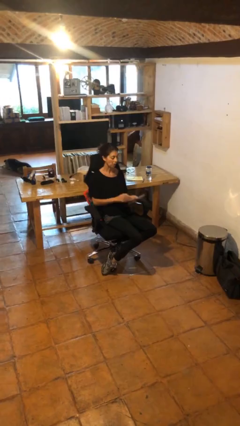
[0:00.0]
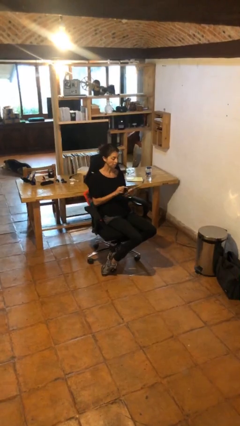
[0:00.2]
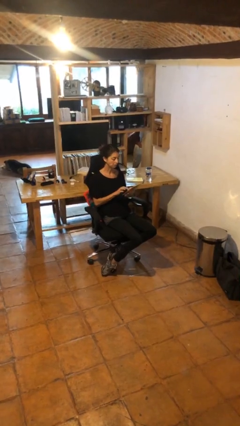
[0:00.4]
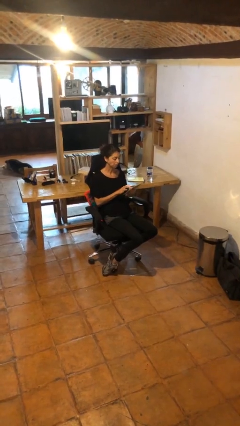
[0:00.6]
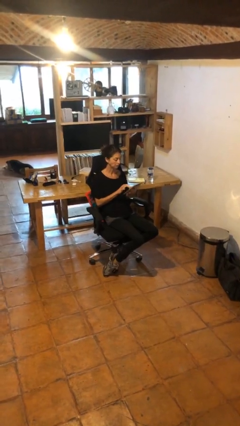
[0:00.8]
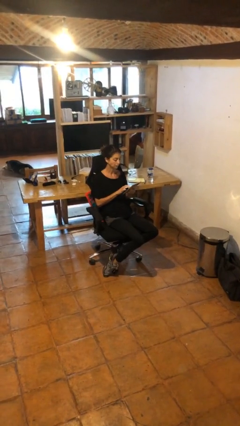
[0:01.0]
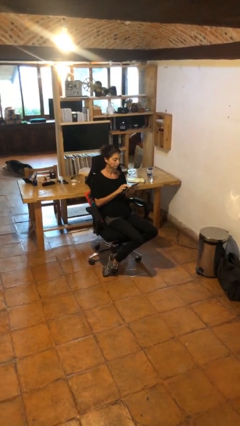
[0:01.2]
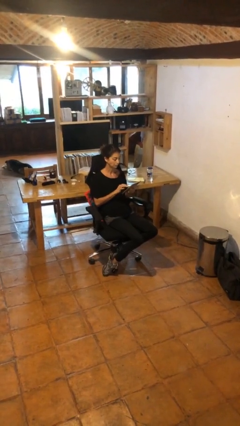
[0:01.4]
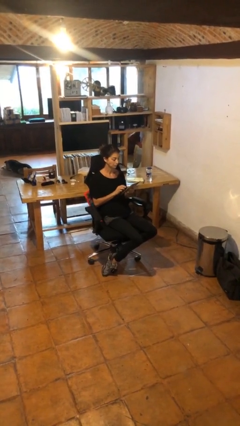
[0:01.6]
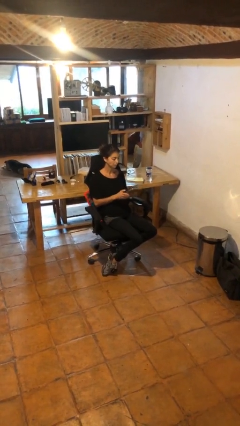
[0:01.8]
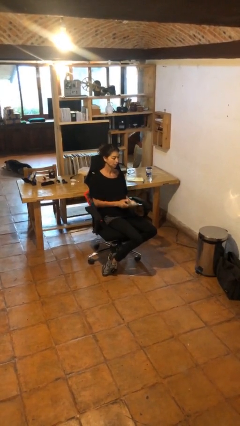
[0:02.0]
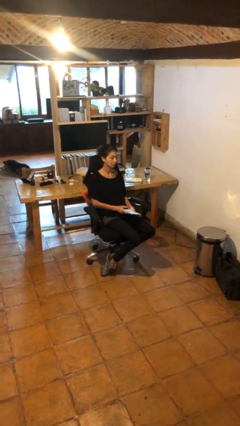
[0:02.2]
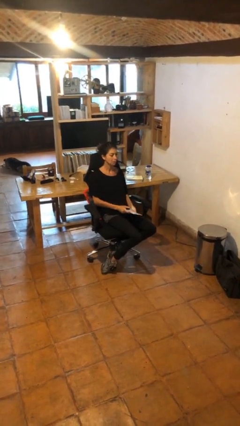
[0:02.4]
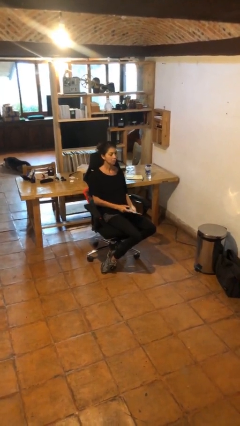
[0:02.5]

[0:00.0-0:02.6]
person interacts with tablet

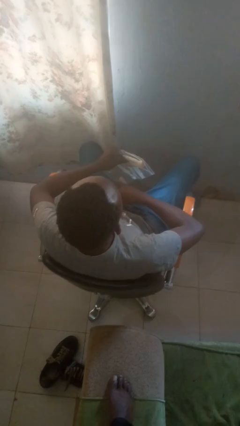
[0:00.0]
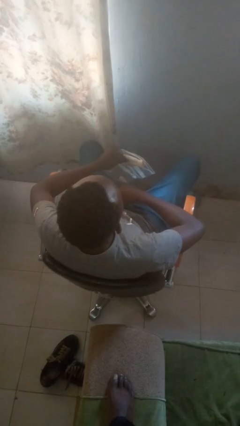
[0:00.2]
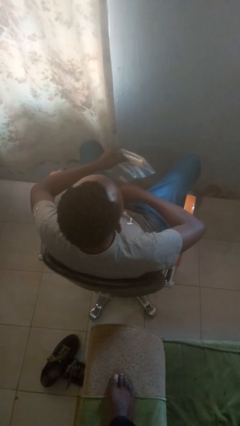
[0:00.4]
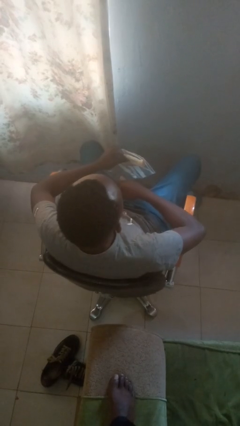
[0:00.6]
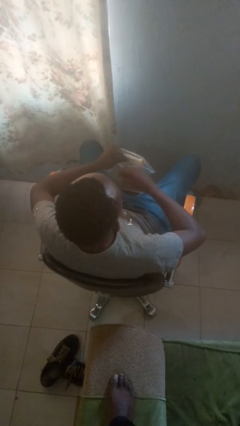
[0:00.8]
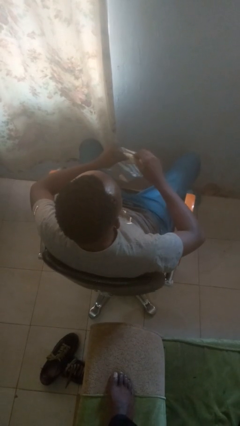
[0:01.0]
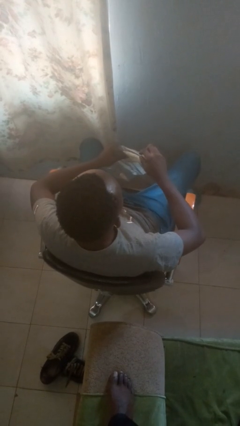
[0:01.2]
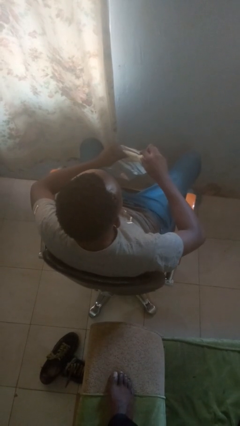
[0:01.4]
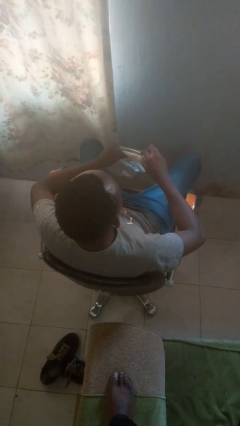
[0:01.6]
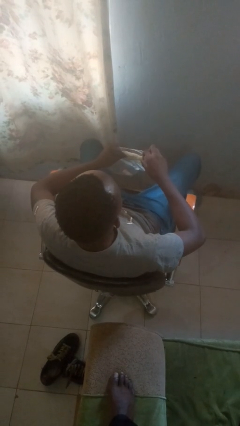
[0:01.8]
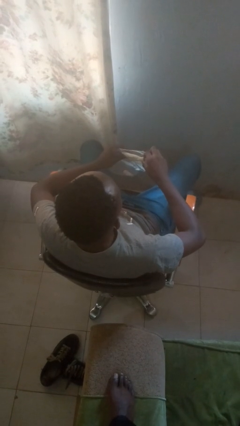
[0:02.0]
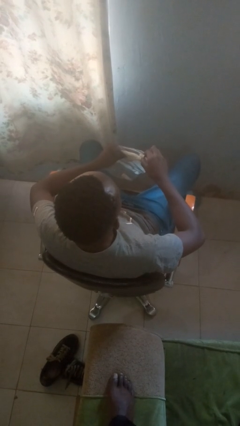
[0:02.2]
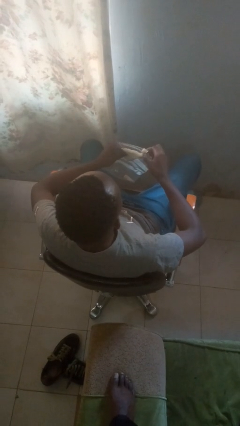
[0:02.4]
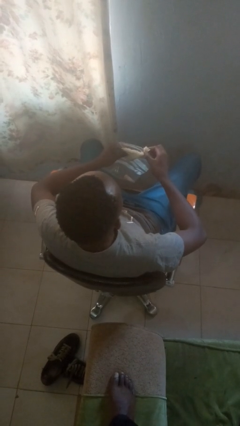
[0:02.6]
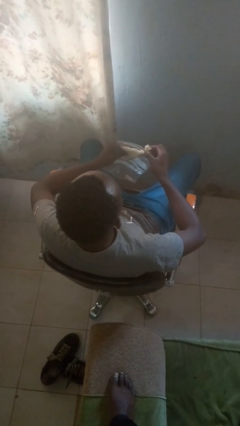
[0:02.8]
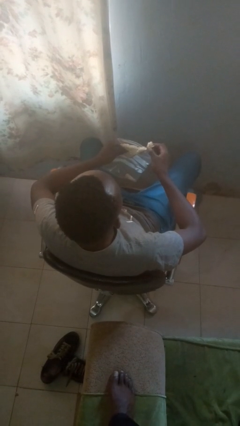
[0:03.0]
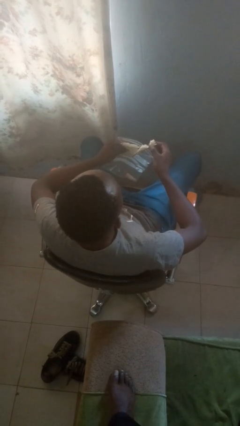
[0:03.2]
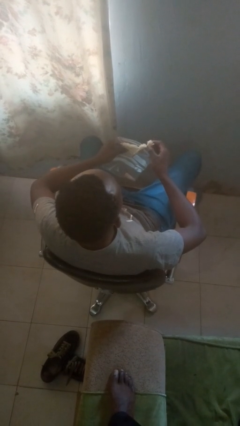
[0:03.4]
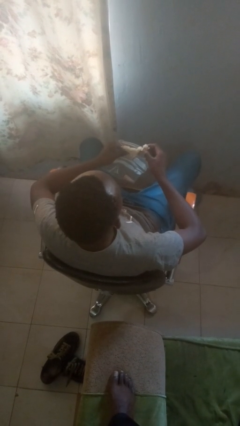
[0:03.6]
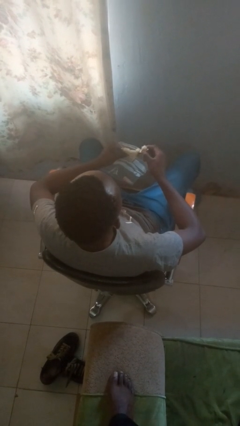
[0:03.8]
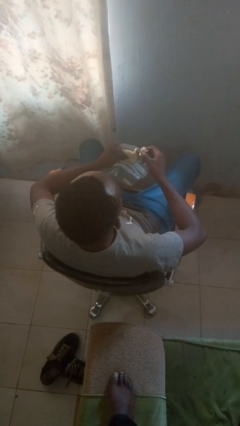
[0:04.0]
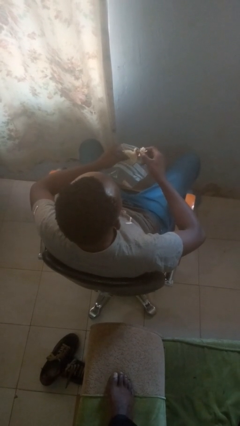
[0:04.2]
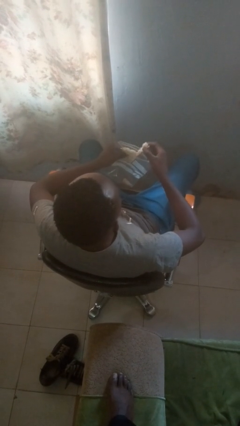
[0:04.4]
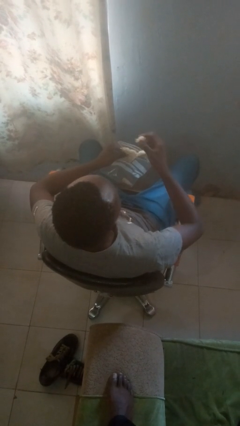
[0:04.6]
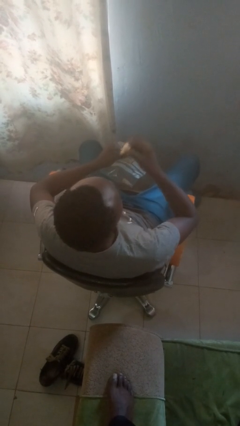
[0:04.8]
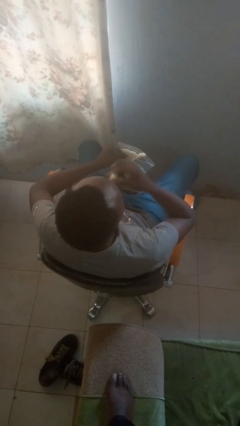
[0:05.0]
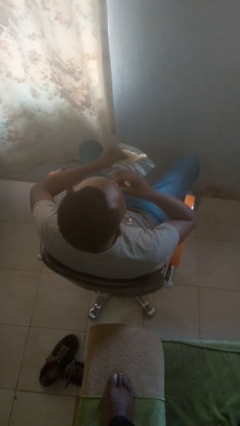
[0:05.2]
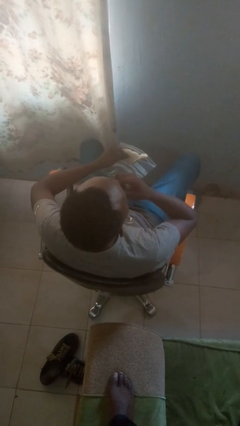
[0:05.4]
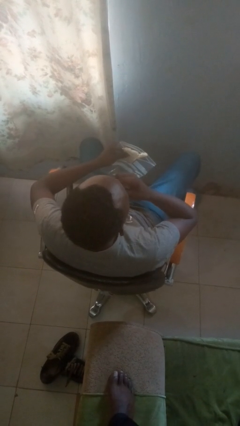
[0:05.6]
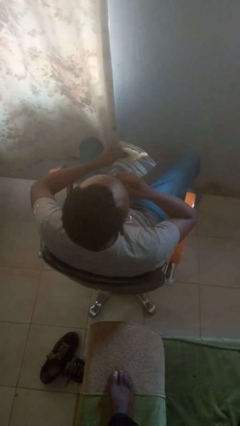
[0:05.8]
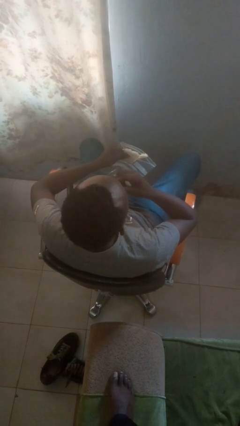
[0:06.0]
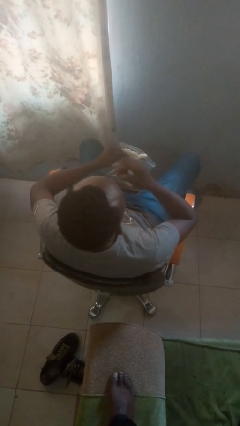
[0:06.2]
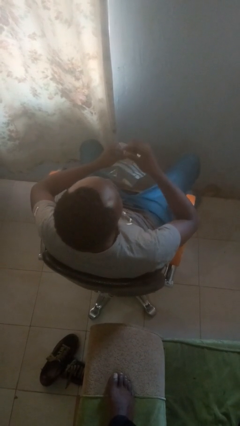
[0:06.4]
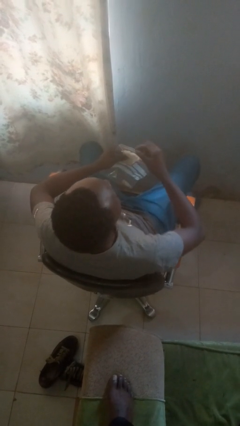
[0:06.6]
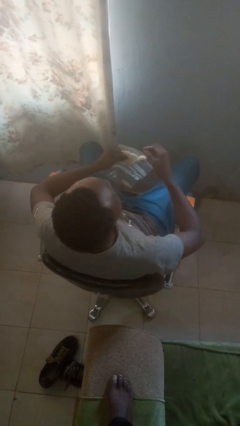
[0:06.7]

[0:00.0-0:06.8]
person eats snack from bag

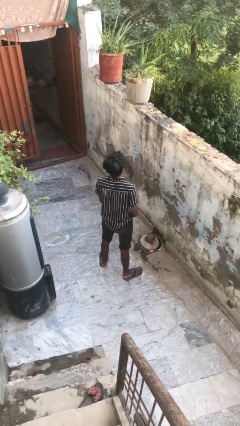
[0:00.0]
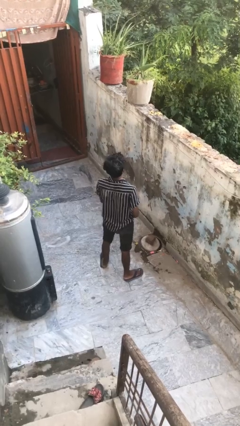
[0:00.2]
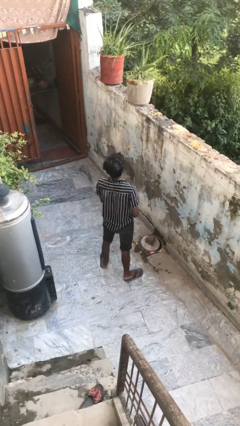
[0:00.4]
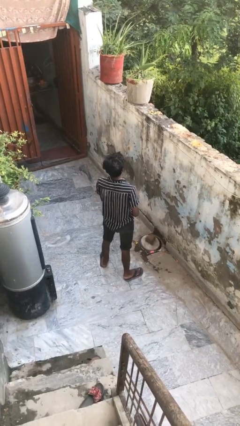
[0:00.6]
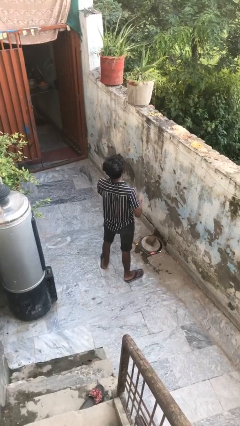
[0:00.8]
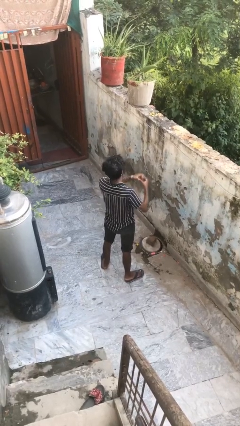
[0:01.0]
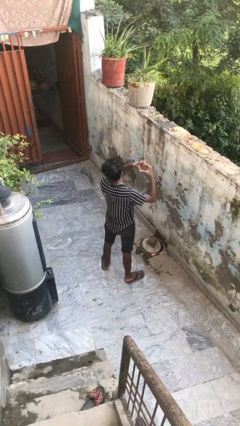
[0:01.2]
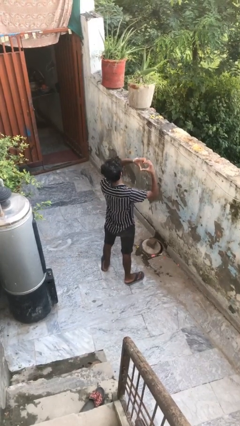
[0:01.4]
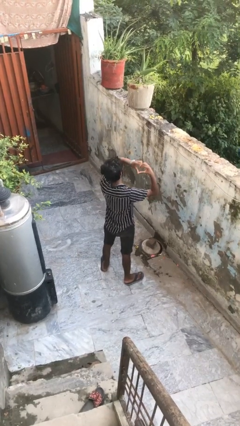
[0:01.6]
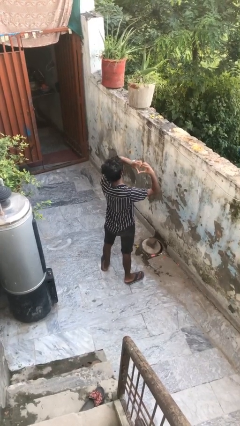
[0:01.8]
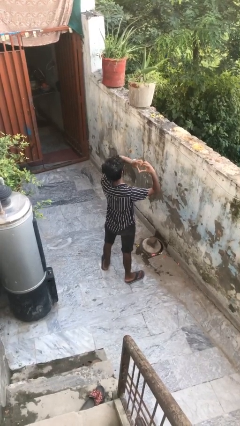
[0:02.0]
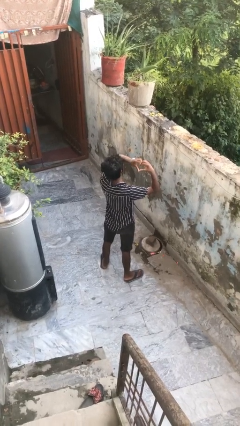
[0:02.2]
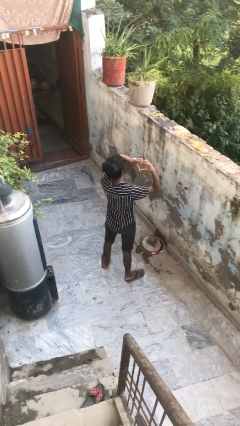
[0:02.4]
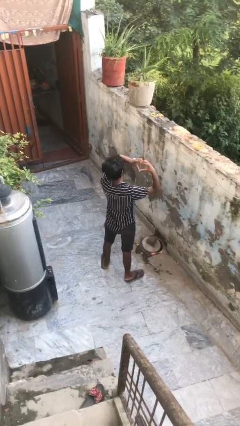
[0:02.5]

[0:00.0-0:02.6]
person gestures heart

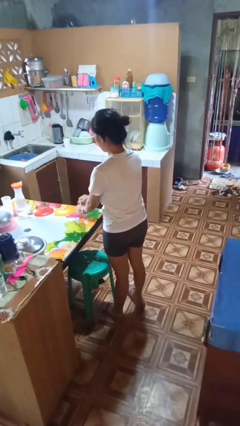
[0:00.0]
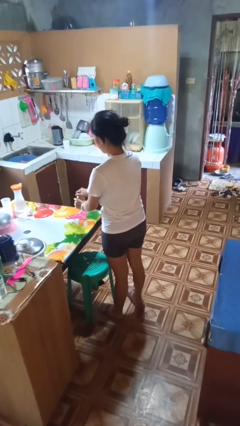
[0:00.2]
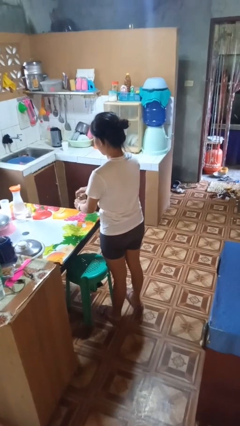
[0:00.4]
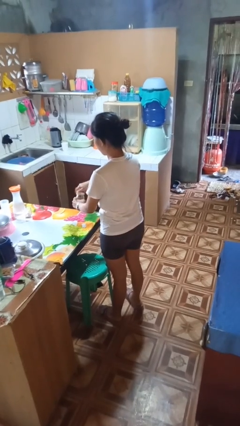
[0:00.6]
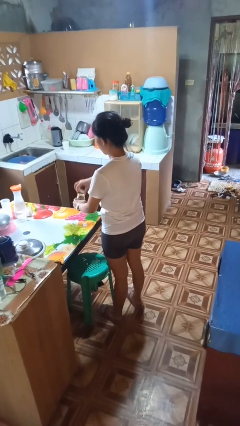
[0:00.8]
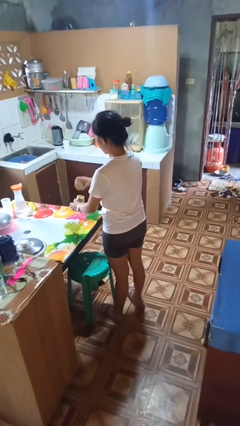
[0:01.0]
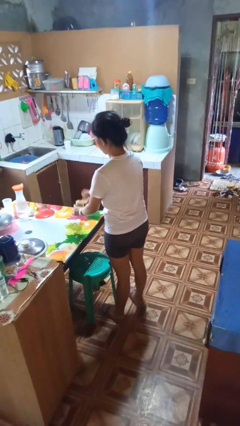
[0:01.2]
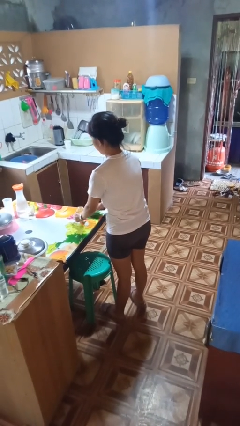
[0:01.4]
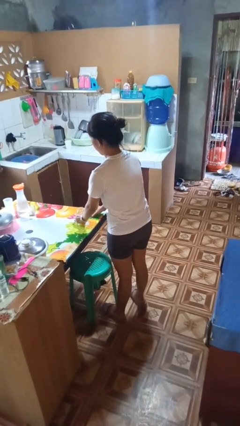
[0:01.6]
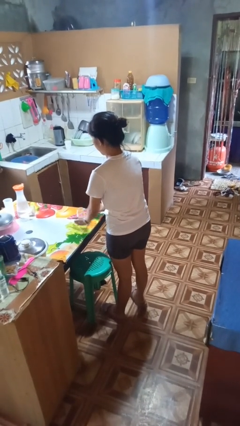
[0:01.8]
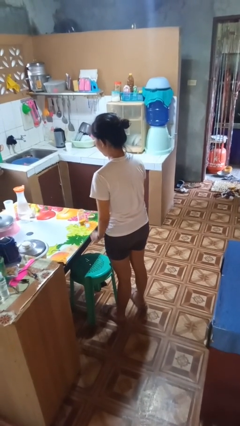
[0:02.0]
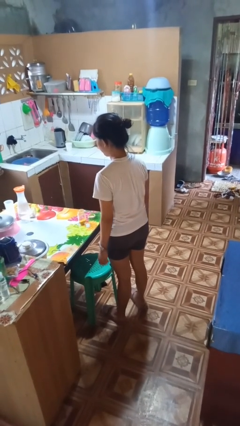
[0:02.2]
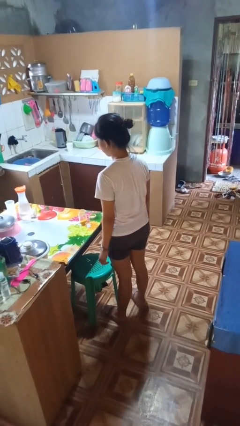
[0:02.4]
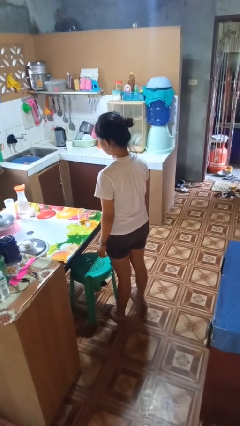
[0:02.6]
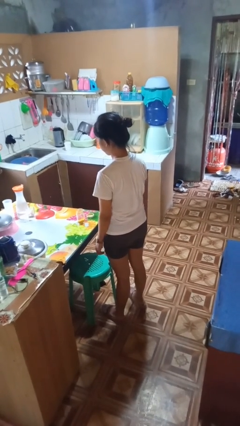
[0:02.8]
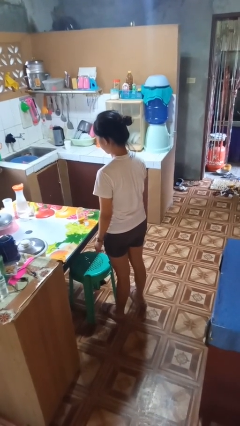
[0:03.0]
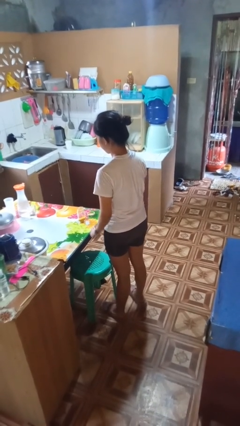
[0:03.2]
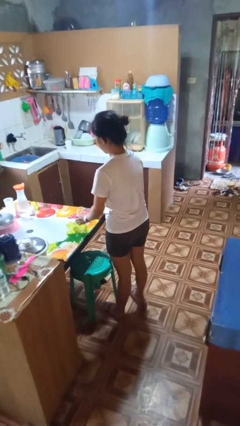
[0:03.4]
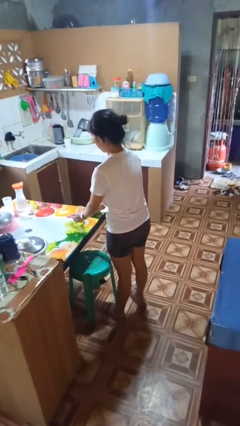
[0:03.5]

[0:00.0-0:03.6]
person opens jar

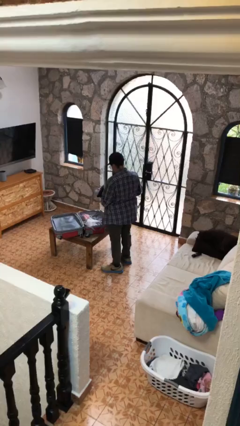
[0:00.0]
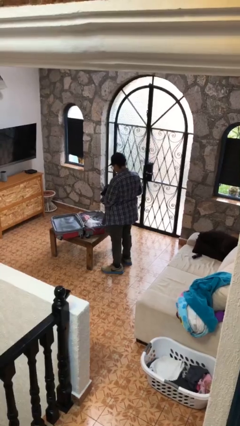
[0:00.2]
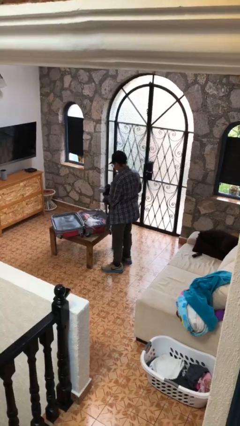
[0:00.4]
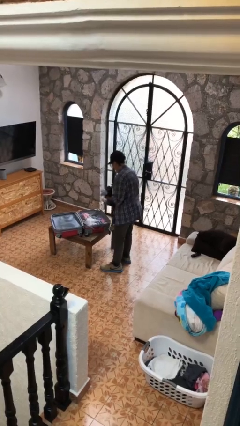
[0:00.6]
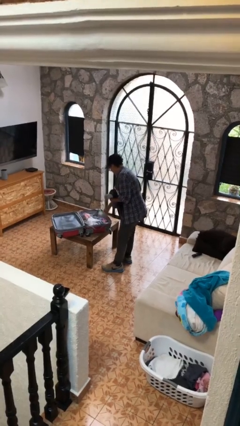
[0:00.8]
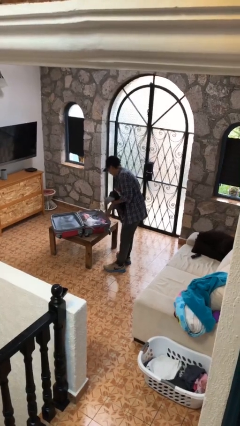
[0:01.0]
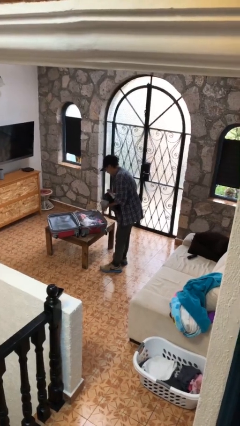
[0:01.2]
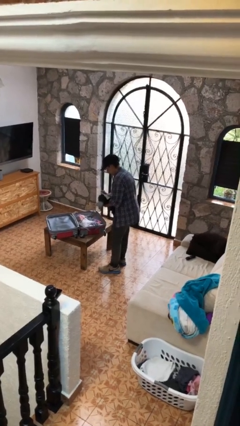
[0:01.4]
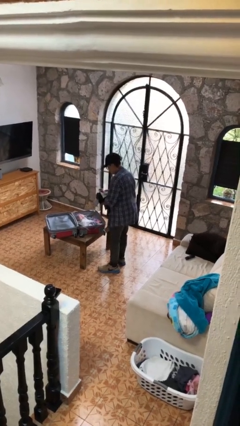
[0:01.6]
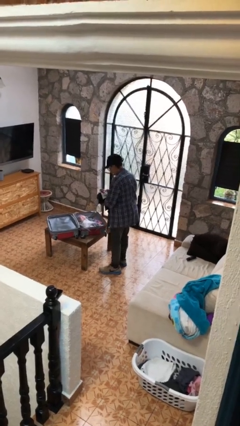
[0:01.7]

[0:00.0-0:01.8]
person loads clothes into suitcase

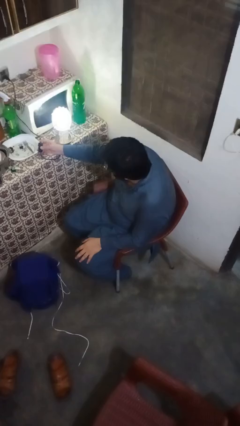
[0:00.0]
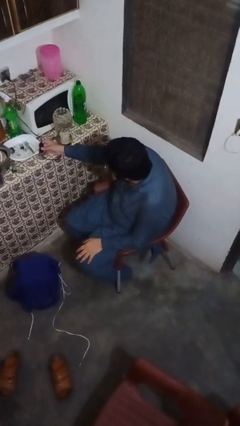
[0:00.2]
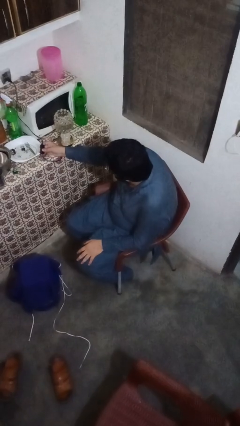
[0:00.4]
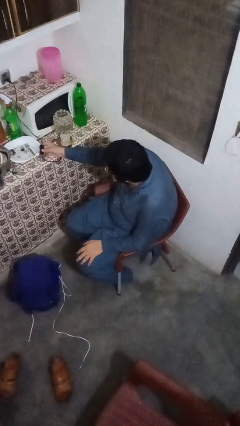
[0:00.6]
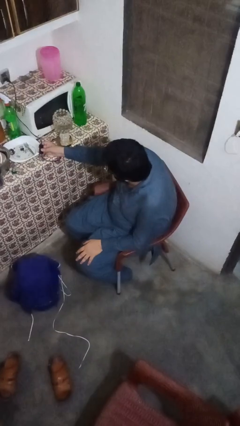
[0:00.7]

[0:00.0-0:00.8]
person turns off lamp
